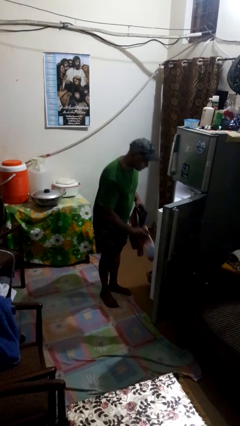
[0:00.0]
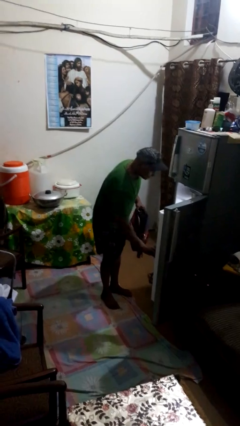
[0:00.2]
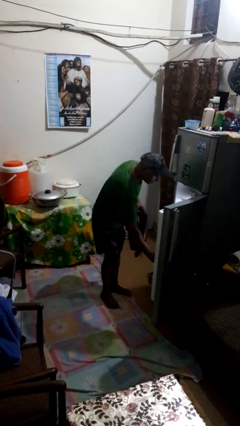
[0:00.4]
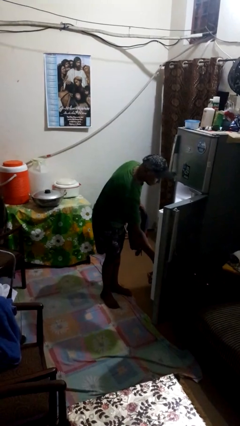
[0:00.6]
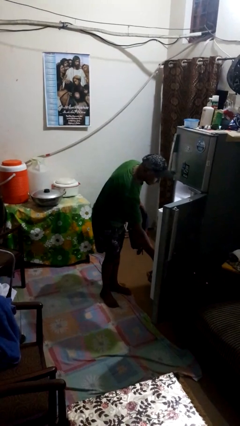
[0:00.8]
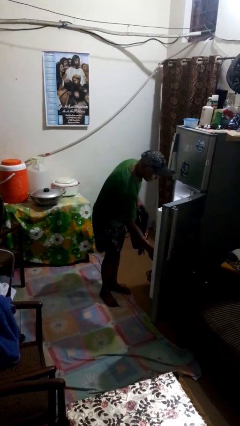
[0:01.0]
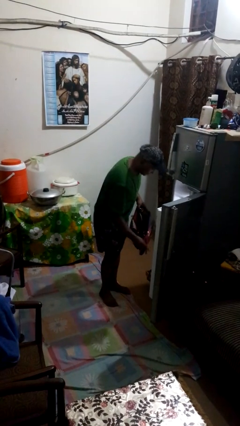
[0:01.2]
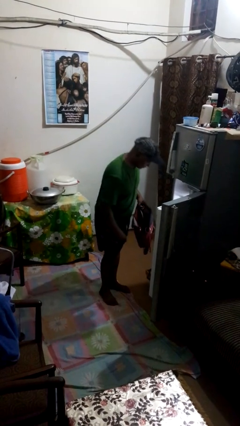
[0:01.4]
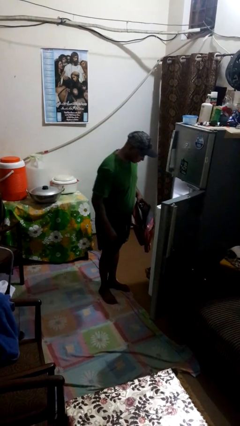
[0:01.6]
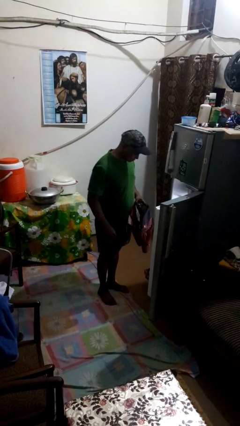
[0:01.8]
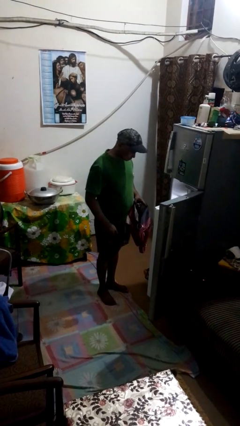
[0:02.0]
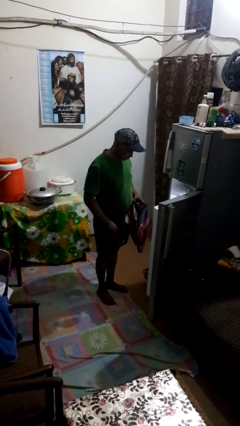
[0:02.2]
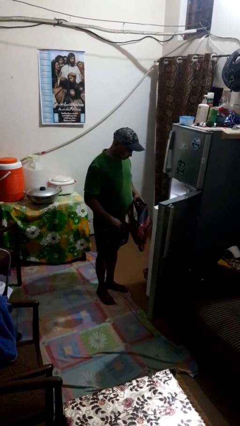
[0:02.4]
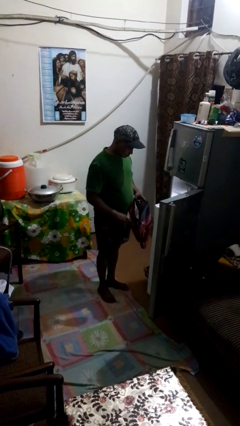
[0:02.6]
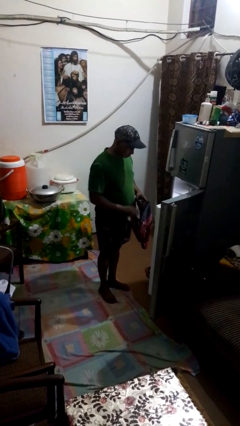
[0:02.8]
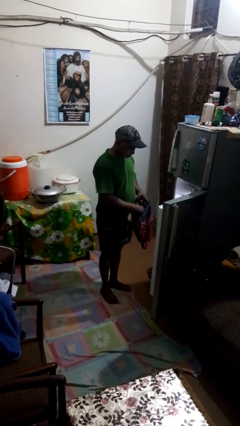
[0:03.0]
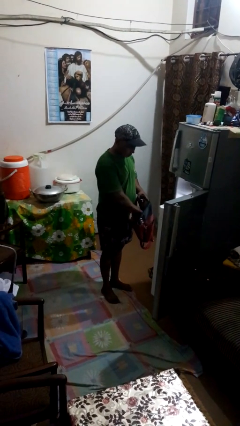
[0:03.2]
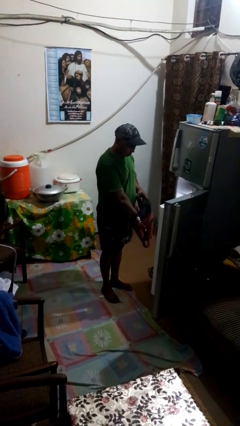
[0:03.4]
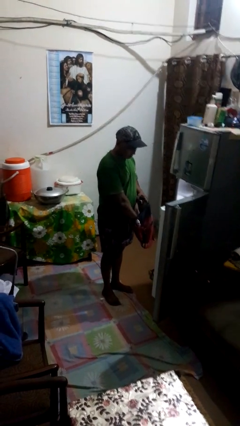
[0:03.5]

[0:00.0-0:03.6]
person loads groceries into refrigerator

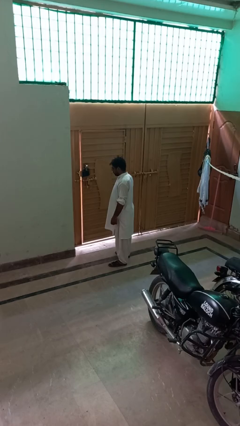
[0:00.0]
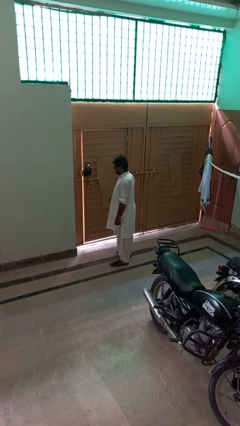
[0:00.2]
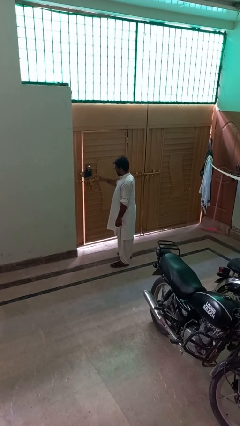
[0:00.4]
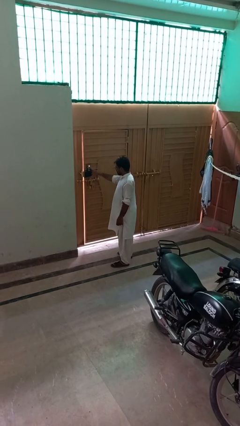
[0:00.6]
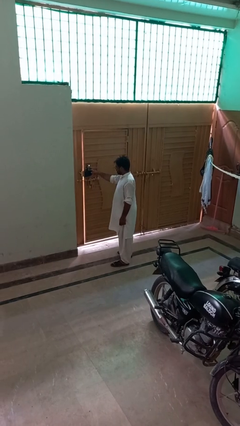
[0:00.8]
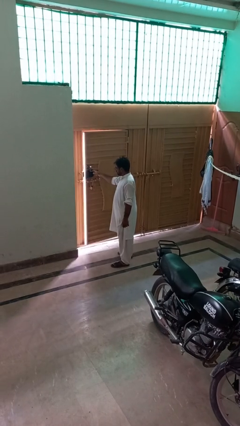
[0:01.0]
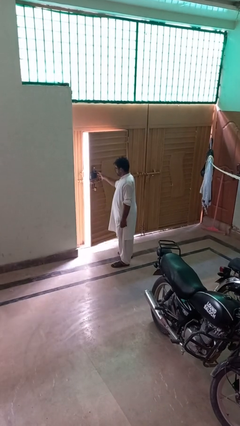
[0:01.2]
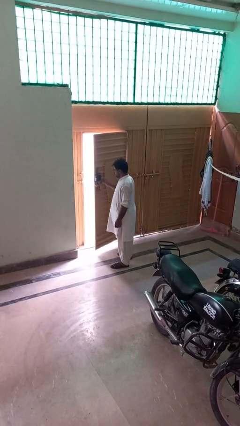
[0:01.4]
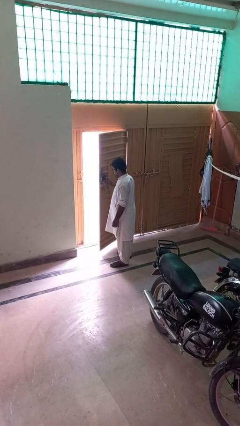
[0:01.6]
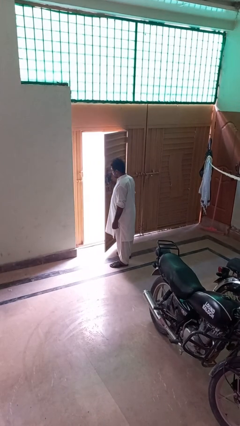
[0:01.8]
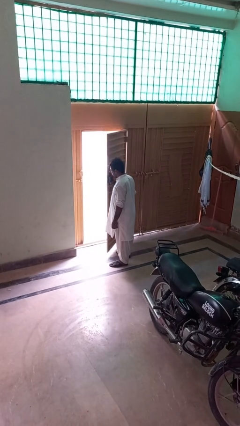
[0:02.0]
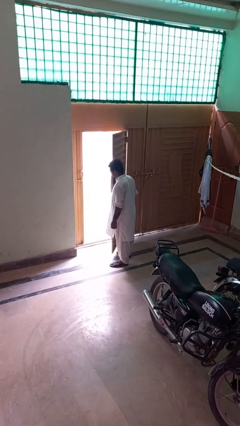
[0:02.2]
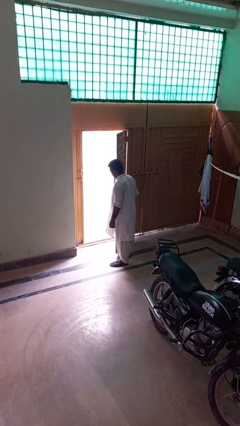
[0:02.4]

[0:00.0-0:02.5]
person opens gate

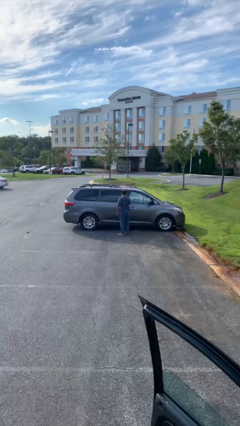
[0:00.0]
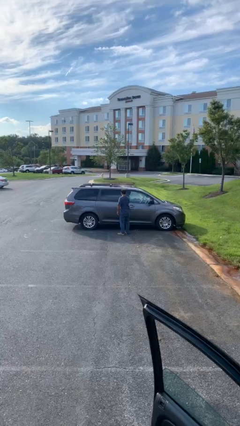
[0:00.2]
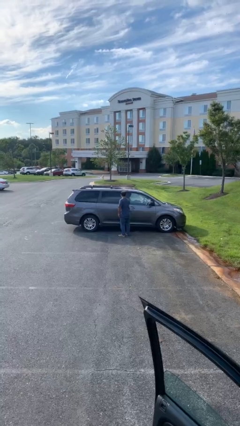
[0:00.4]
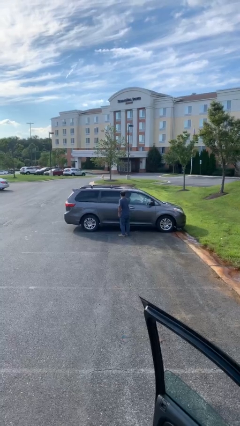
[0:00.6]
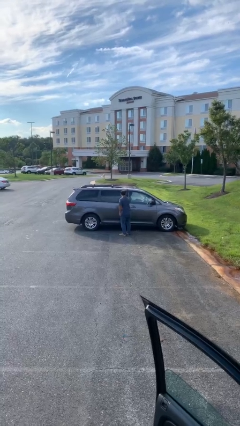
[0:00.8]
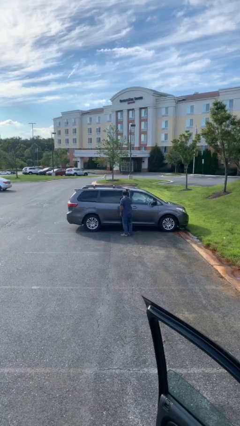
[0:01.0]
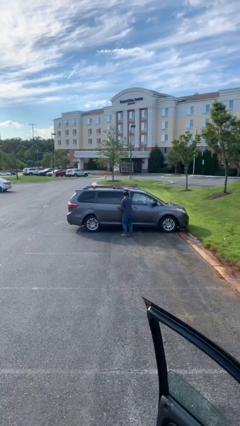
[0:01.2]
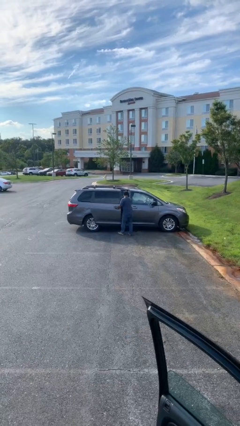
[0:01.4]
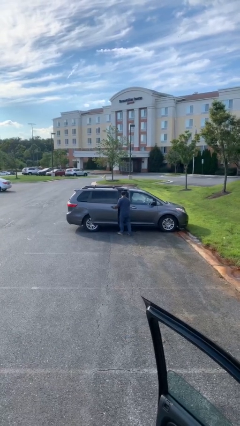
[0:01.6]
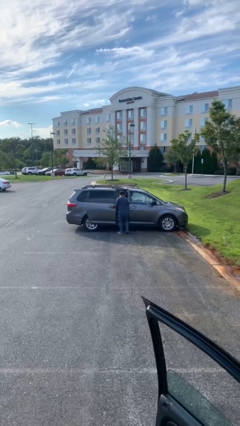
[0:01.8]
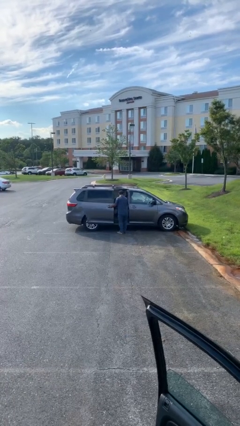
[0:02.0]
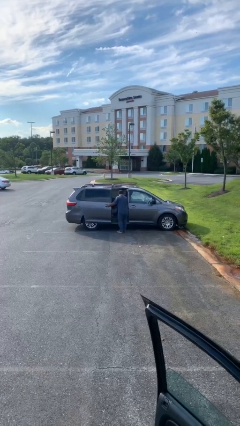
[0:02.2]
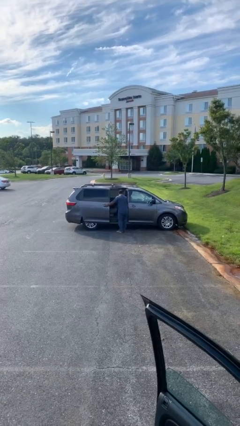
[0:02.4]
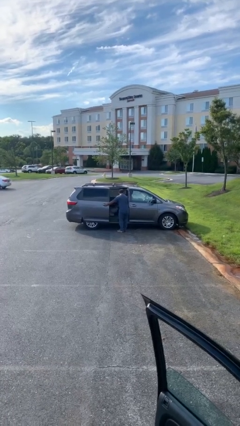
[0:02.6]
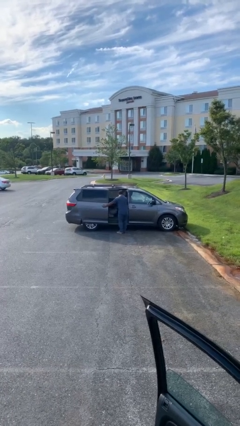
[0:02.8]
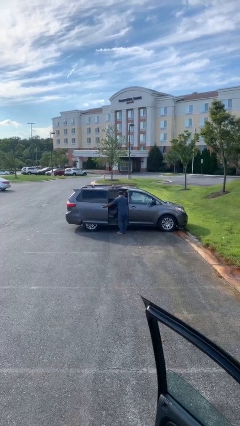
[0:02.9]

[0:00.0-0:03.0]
person opens car door

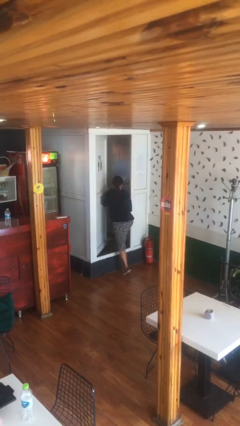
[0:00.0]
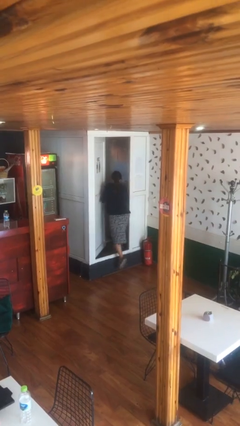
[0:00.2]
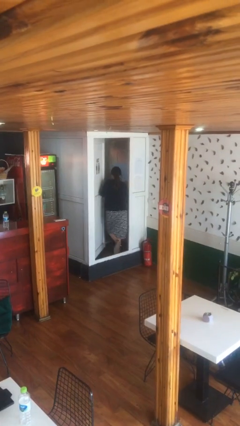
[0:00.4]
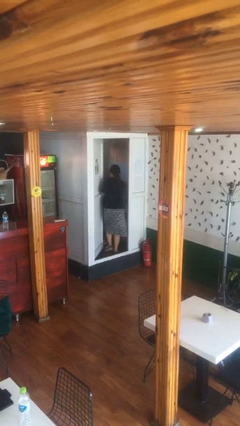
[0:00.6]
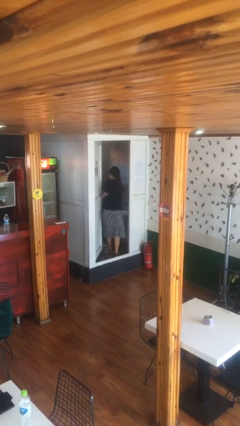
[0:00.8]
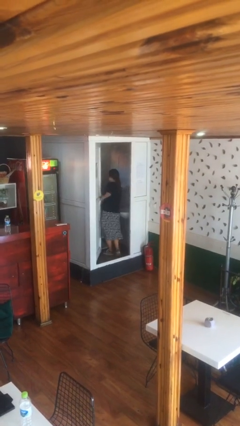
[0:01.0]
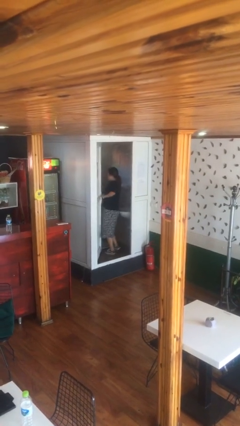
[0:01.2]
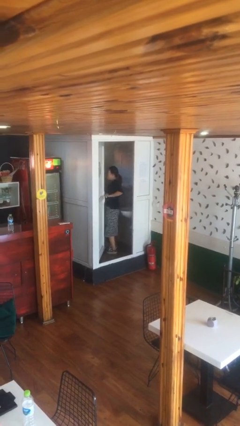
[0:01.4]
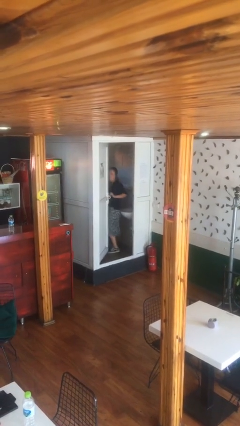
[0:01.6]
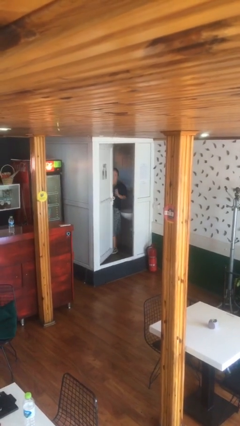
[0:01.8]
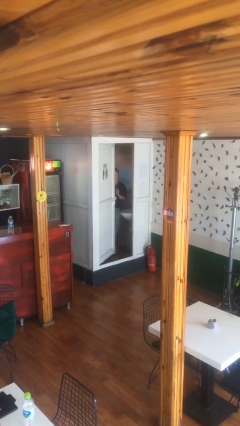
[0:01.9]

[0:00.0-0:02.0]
person exits scene through structure

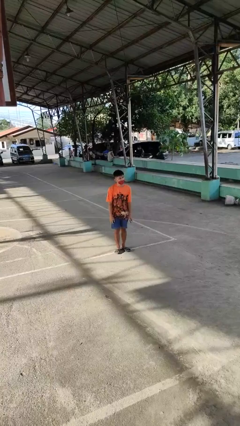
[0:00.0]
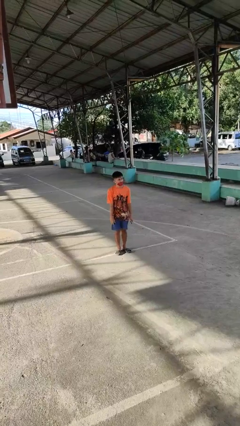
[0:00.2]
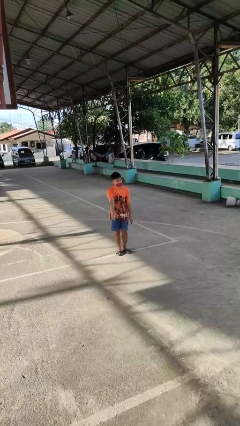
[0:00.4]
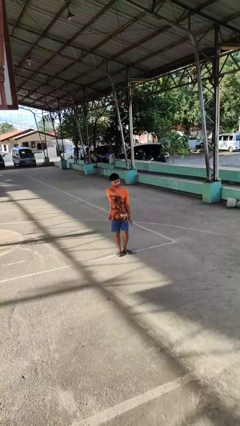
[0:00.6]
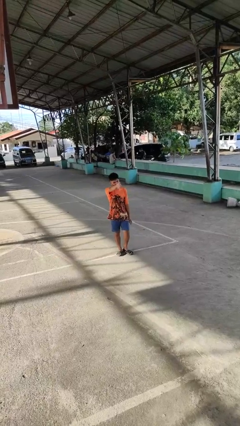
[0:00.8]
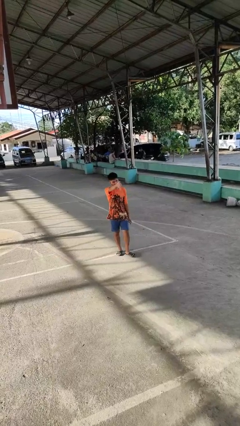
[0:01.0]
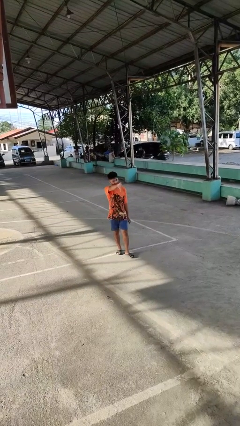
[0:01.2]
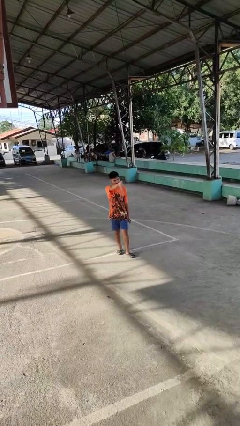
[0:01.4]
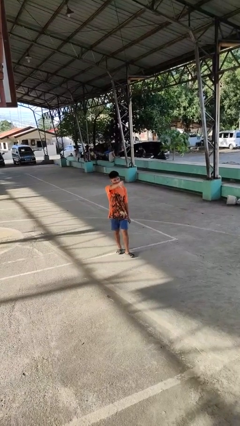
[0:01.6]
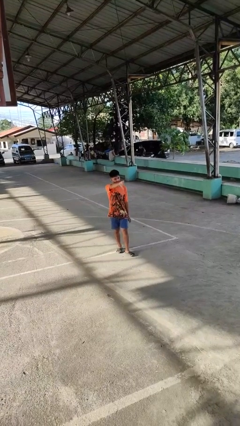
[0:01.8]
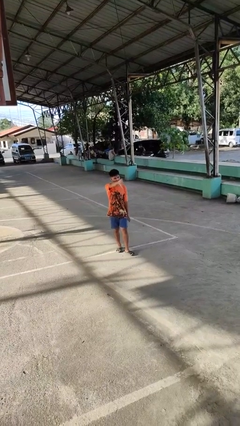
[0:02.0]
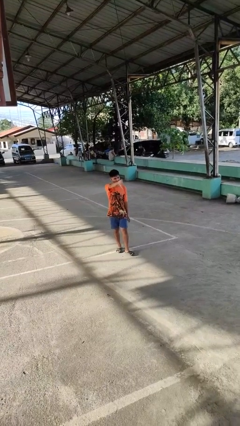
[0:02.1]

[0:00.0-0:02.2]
person gestures thumbs down

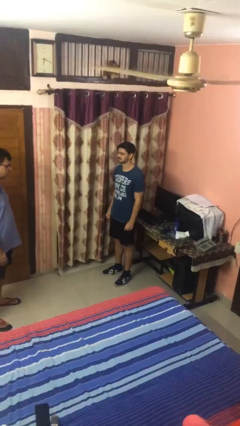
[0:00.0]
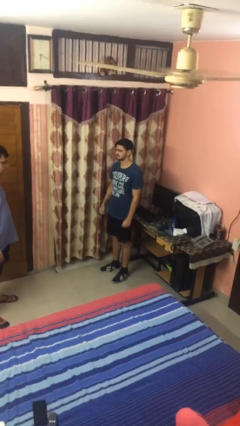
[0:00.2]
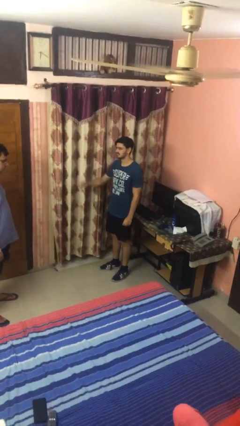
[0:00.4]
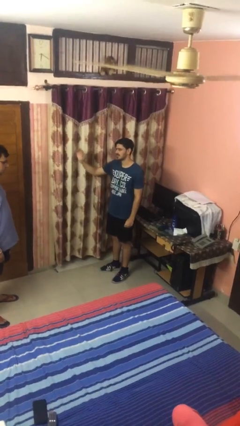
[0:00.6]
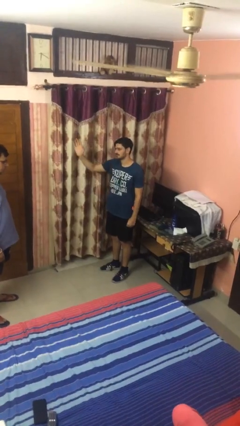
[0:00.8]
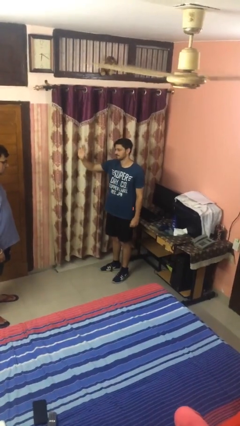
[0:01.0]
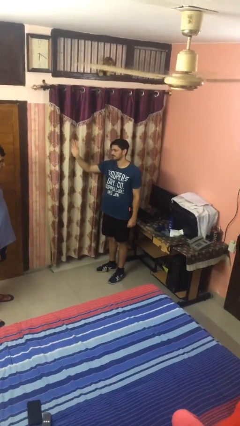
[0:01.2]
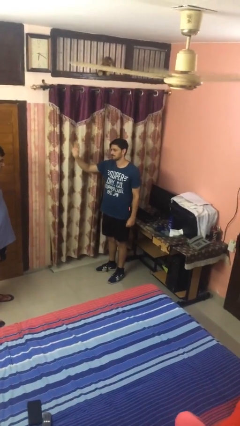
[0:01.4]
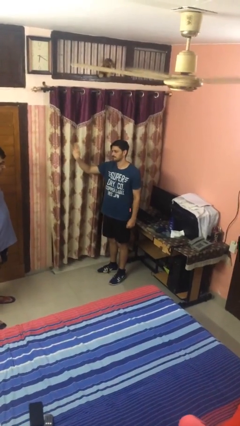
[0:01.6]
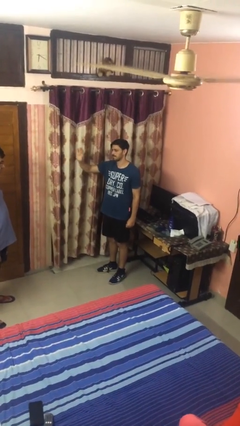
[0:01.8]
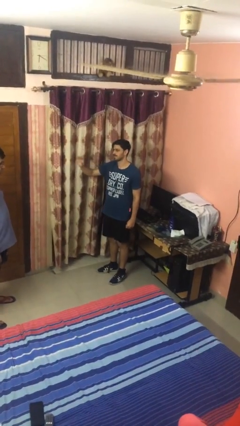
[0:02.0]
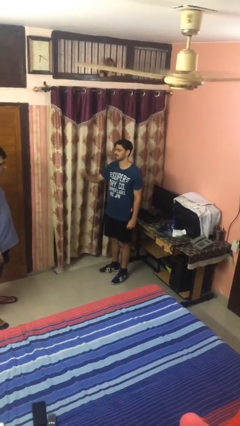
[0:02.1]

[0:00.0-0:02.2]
person waves at person

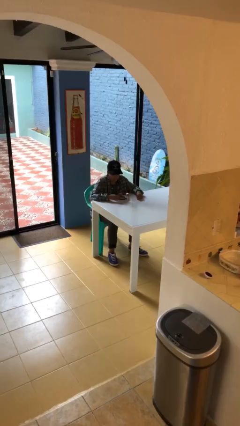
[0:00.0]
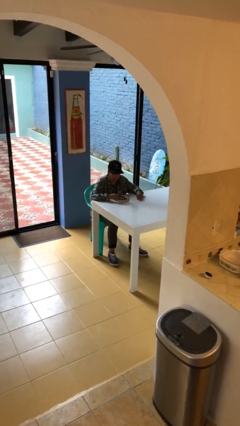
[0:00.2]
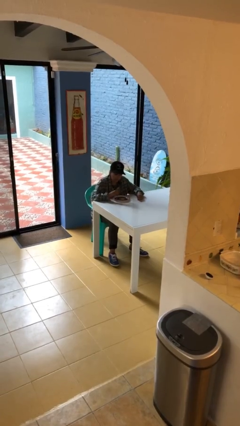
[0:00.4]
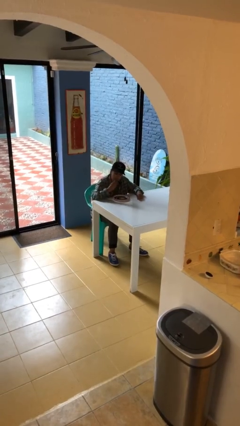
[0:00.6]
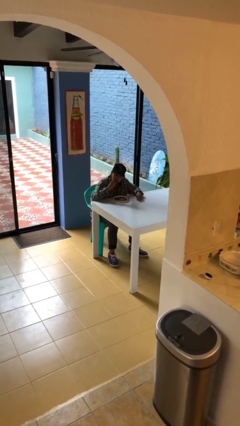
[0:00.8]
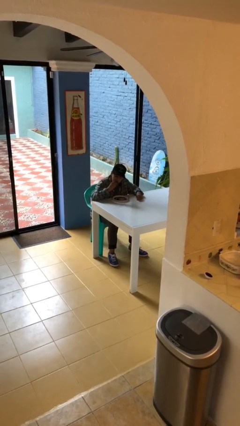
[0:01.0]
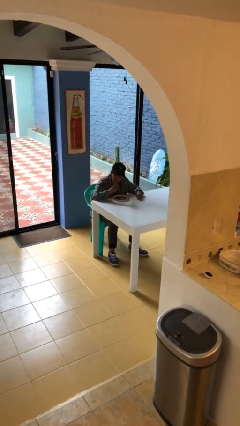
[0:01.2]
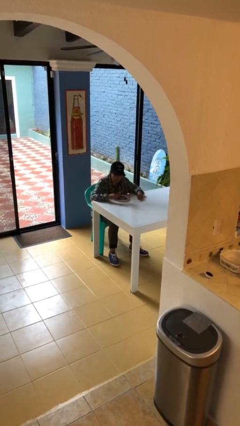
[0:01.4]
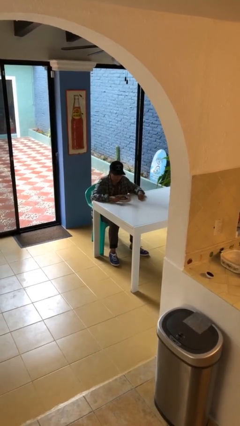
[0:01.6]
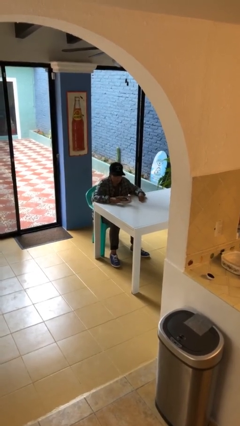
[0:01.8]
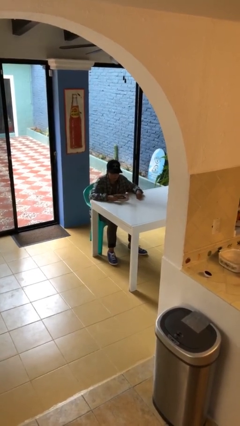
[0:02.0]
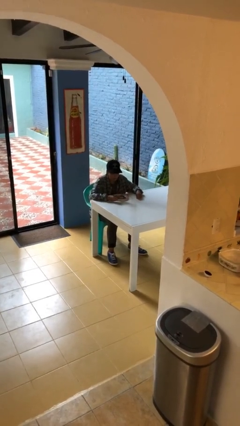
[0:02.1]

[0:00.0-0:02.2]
person eats with hands
